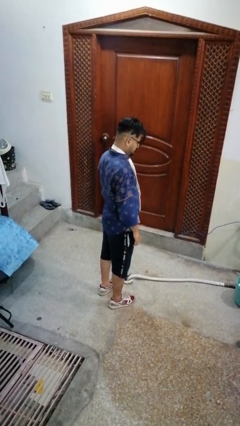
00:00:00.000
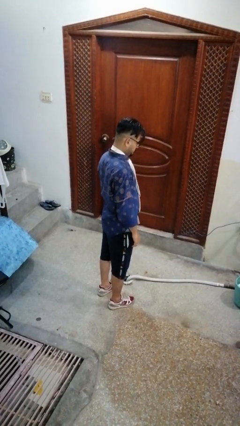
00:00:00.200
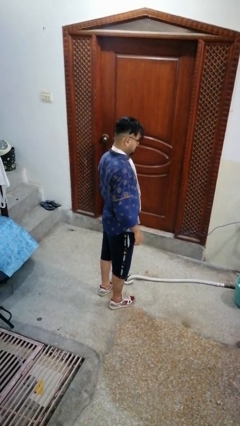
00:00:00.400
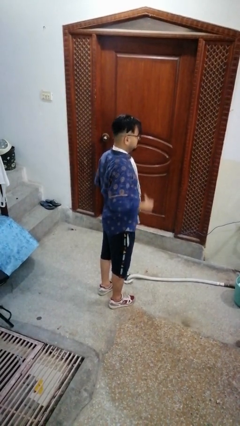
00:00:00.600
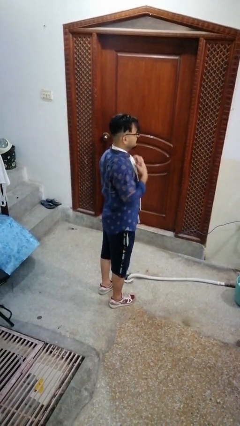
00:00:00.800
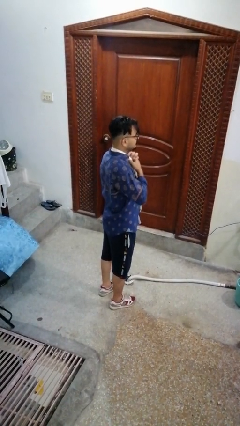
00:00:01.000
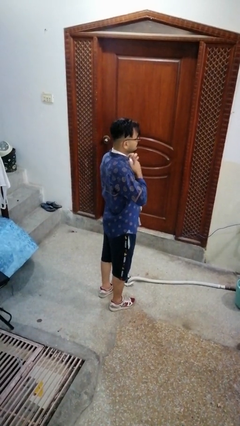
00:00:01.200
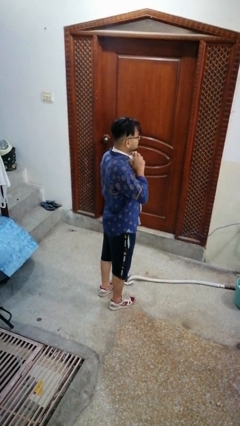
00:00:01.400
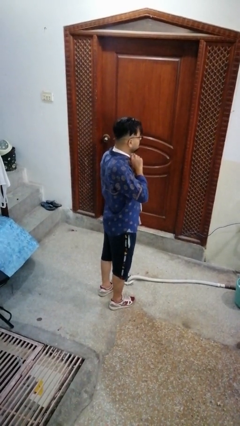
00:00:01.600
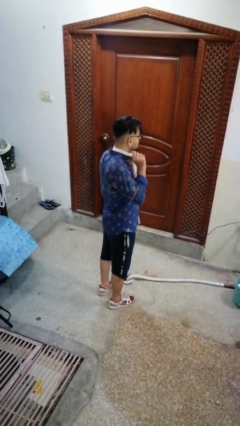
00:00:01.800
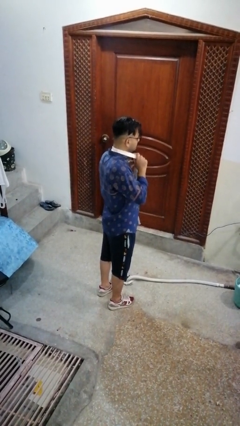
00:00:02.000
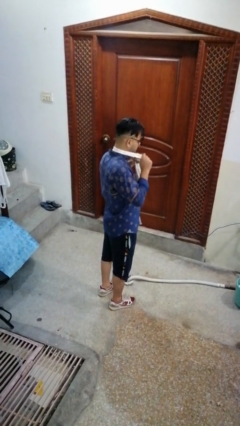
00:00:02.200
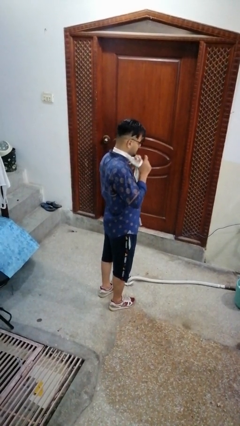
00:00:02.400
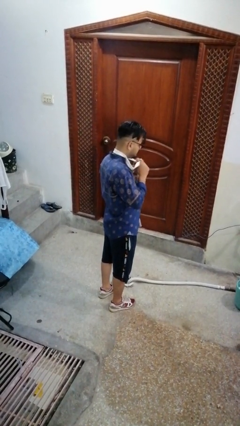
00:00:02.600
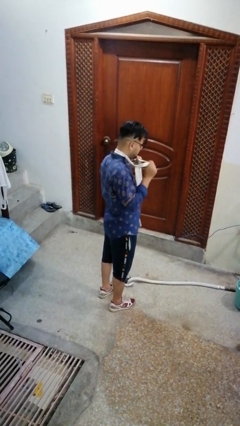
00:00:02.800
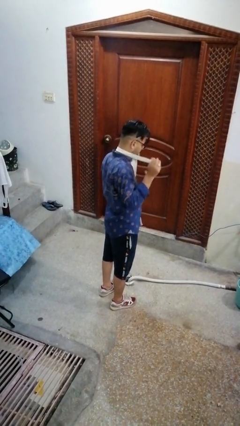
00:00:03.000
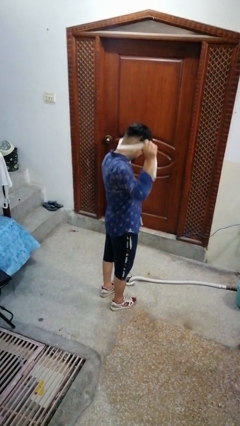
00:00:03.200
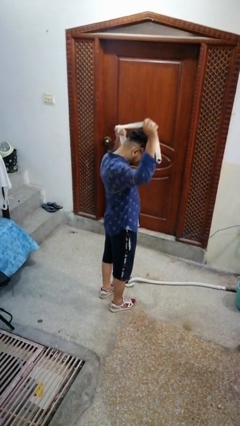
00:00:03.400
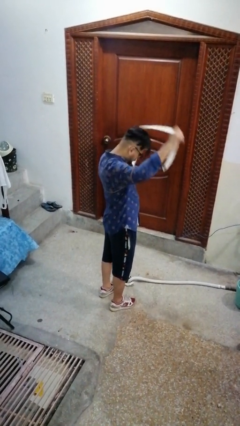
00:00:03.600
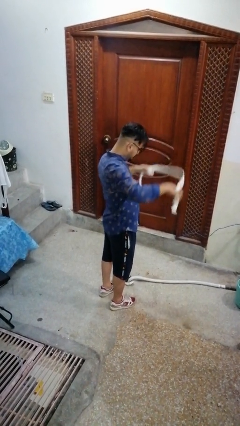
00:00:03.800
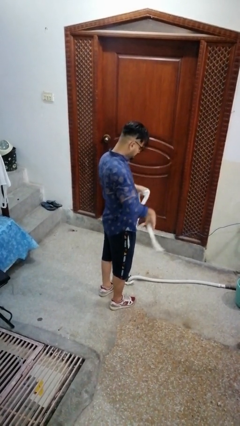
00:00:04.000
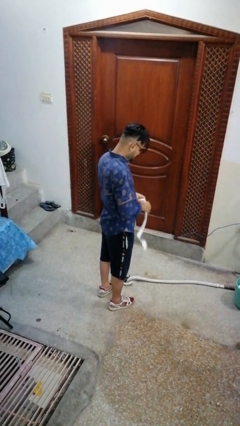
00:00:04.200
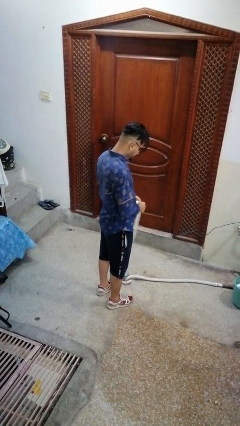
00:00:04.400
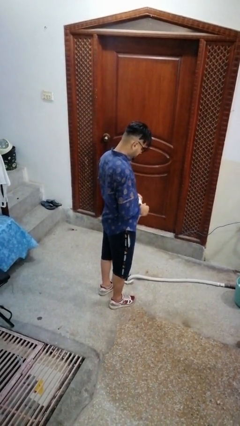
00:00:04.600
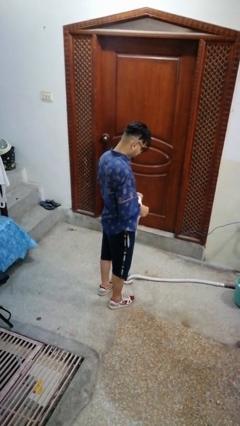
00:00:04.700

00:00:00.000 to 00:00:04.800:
person takes off necktie

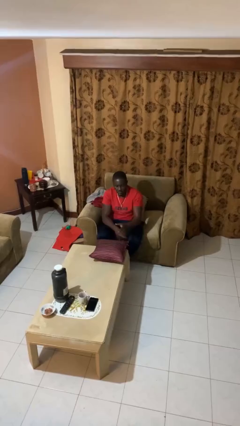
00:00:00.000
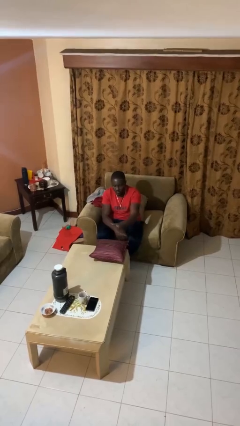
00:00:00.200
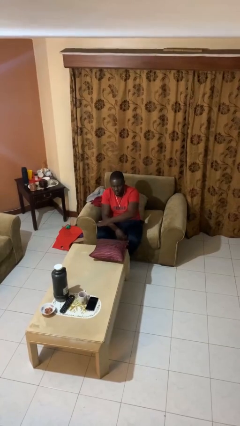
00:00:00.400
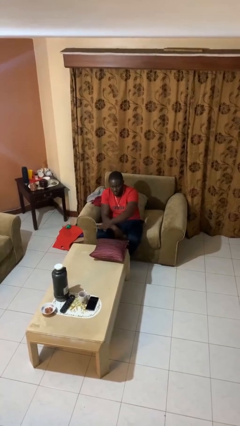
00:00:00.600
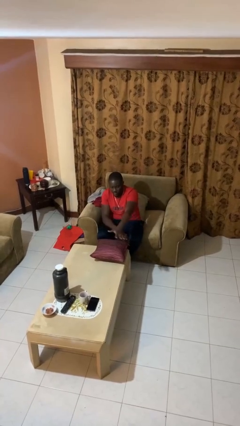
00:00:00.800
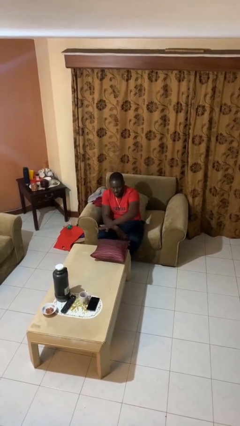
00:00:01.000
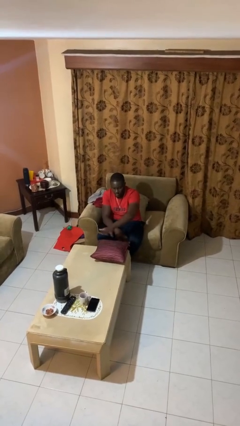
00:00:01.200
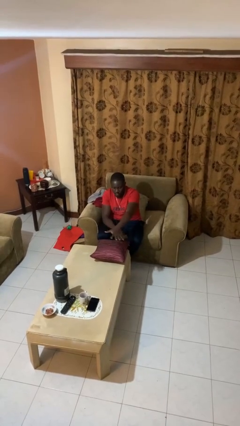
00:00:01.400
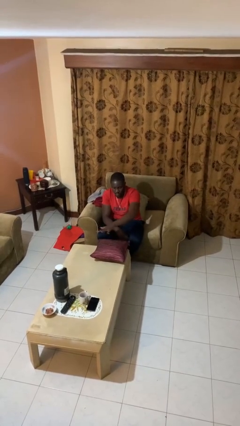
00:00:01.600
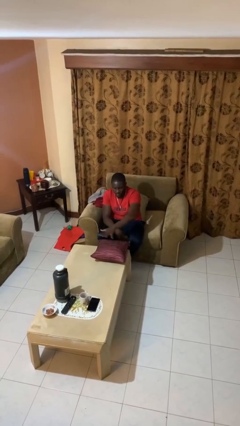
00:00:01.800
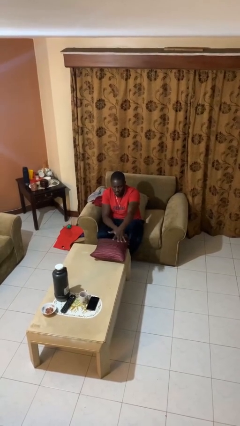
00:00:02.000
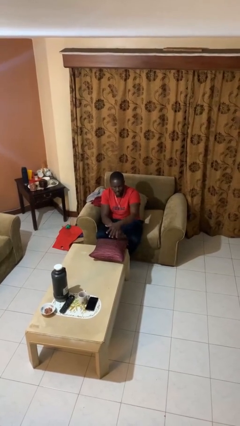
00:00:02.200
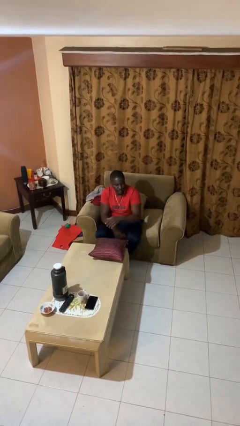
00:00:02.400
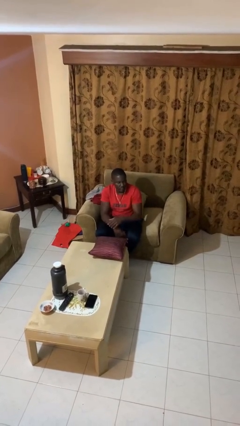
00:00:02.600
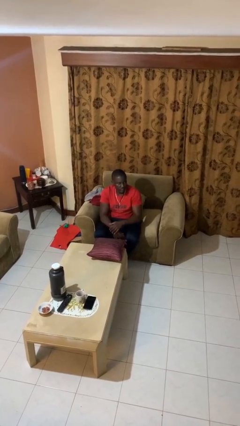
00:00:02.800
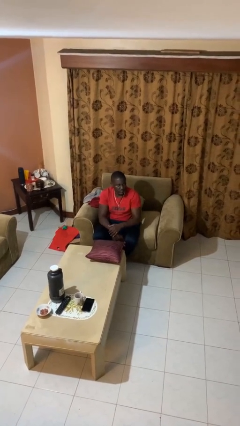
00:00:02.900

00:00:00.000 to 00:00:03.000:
person waves hand over object

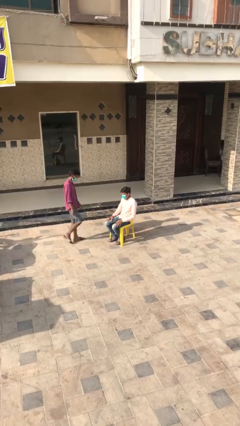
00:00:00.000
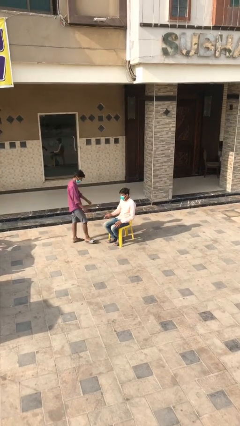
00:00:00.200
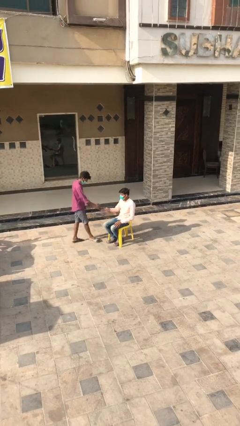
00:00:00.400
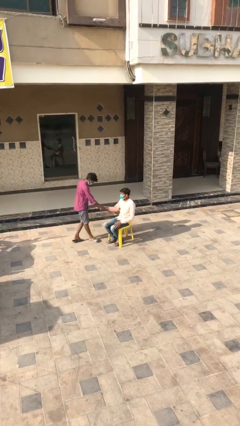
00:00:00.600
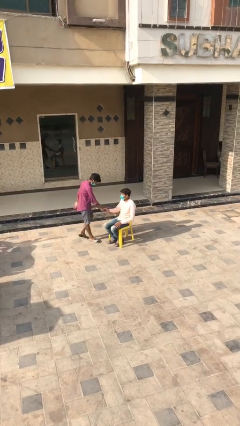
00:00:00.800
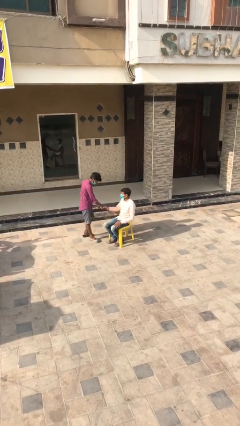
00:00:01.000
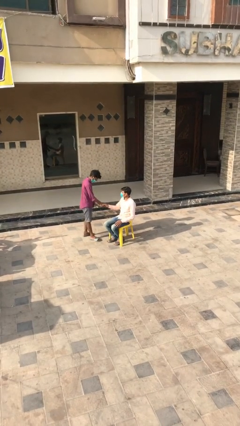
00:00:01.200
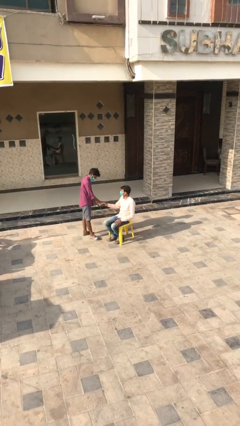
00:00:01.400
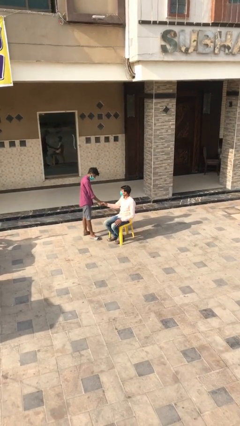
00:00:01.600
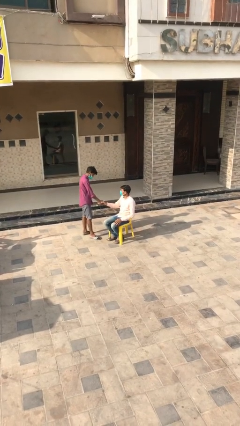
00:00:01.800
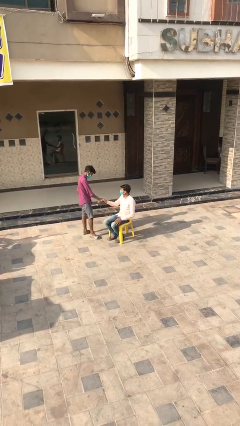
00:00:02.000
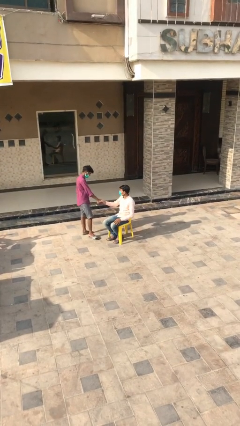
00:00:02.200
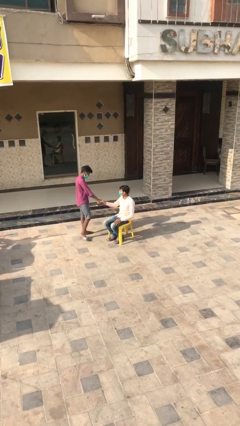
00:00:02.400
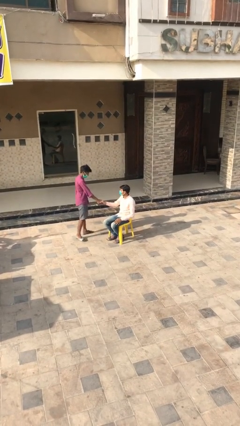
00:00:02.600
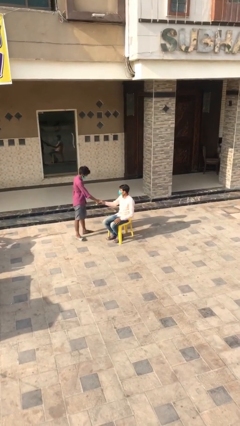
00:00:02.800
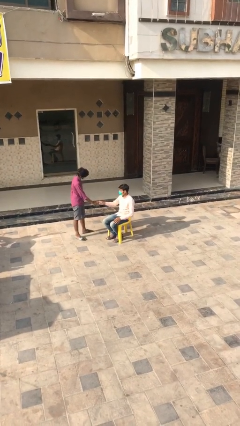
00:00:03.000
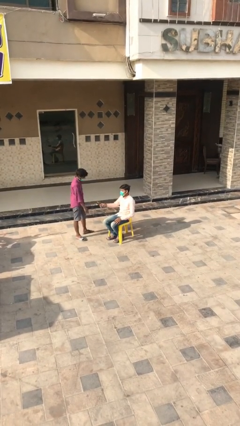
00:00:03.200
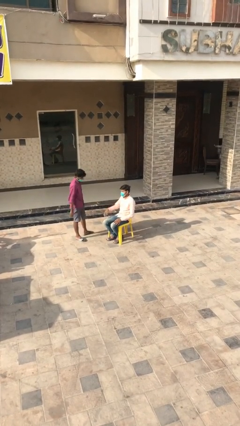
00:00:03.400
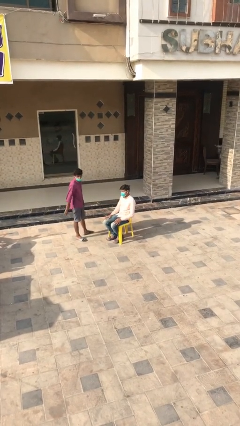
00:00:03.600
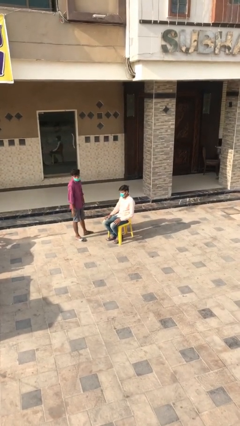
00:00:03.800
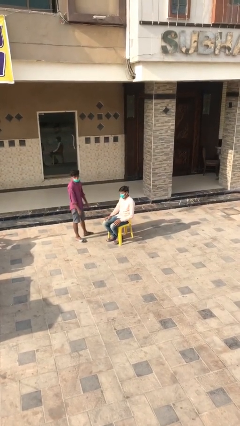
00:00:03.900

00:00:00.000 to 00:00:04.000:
person shakes hand

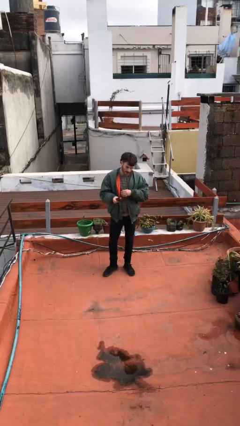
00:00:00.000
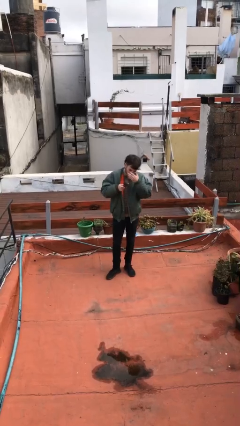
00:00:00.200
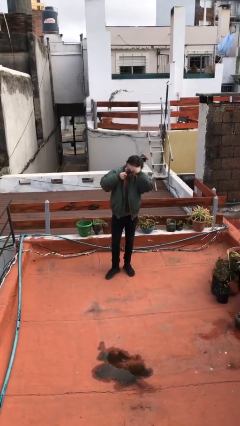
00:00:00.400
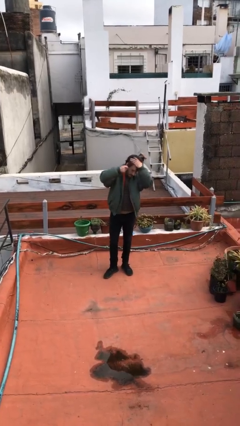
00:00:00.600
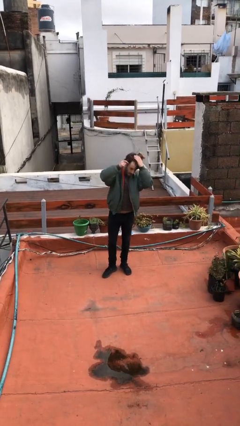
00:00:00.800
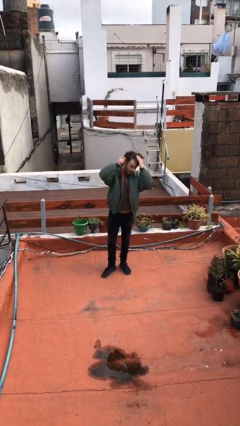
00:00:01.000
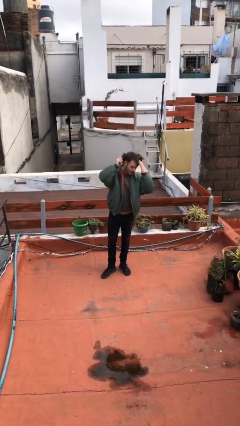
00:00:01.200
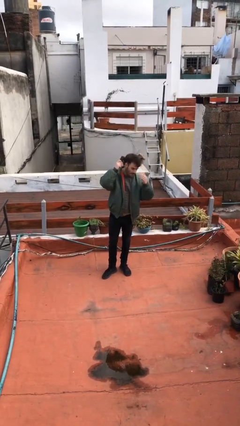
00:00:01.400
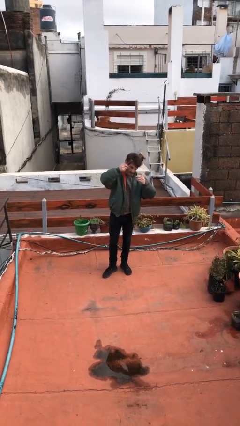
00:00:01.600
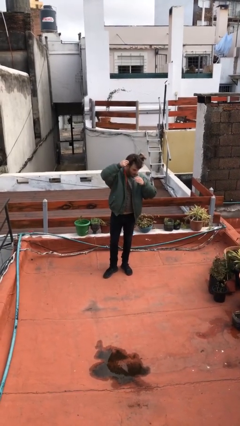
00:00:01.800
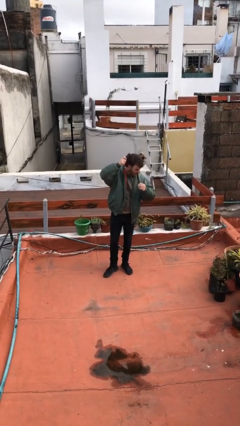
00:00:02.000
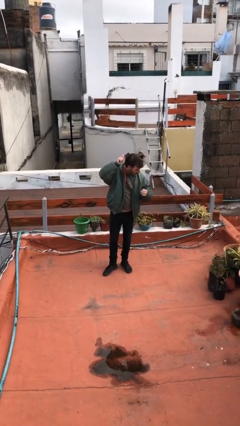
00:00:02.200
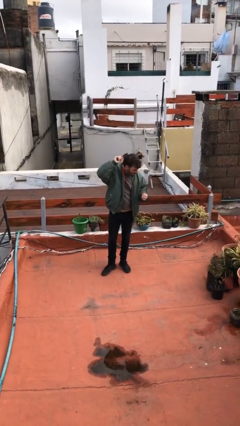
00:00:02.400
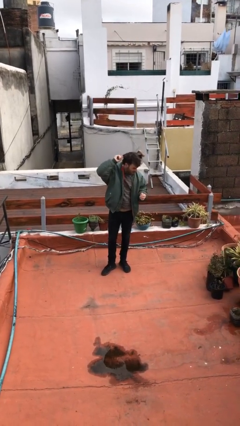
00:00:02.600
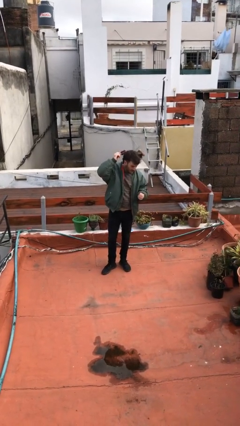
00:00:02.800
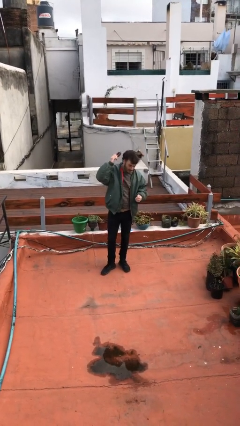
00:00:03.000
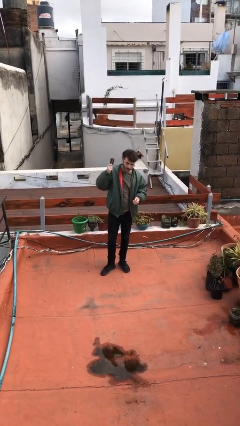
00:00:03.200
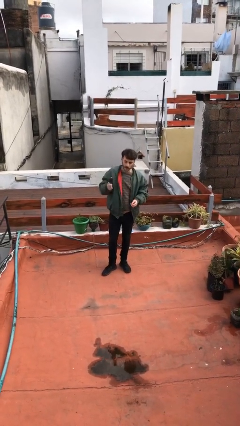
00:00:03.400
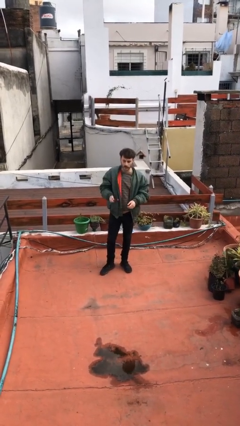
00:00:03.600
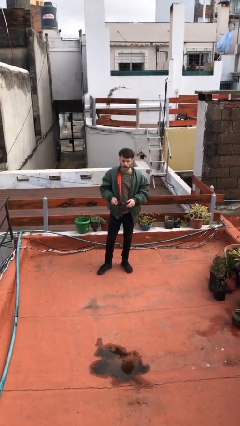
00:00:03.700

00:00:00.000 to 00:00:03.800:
person brushes hair

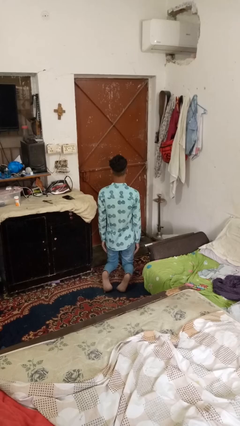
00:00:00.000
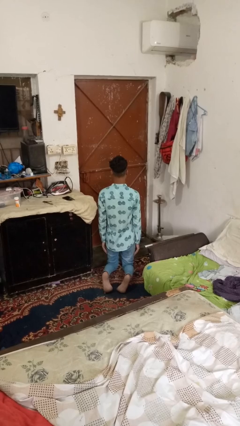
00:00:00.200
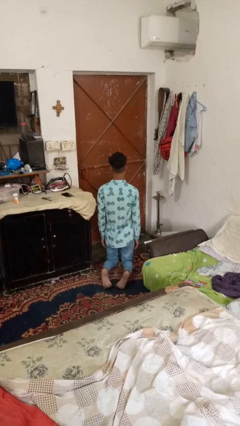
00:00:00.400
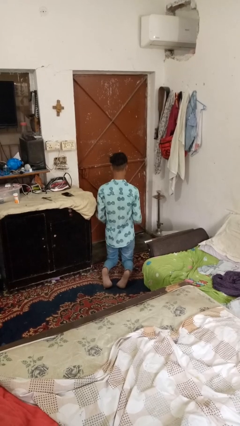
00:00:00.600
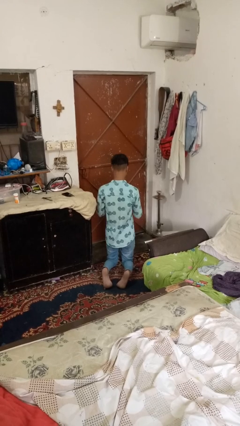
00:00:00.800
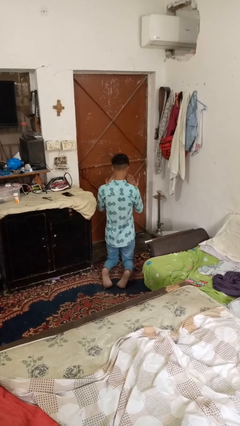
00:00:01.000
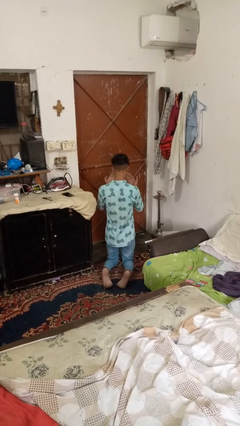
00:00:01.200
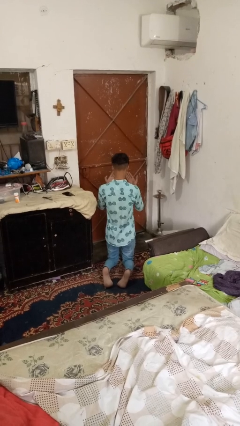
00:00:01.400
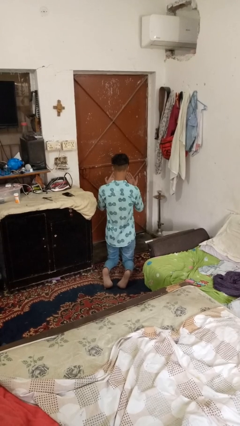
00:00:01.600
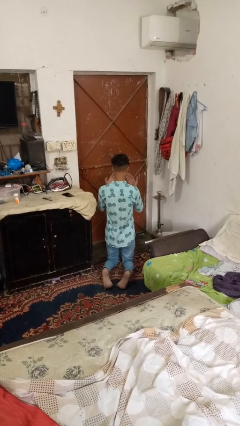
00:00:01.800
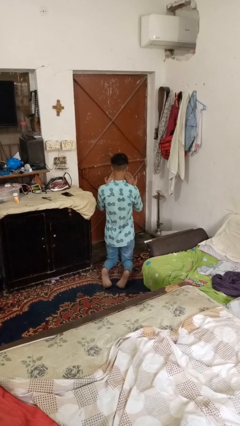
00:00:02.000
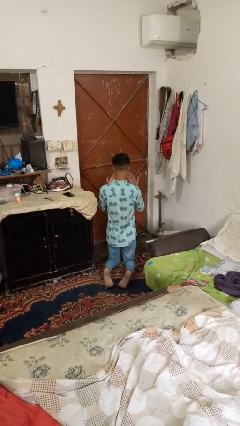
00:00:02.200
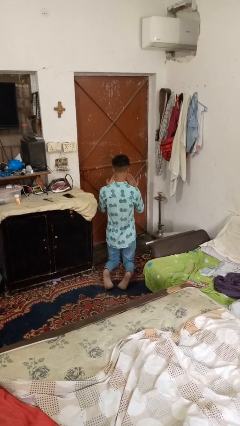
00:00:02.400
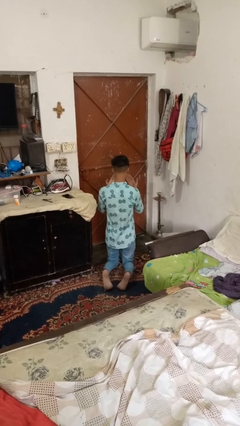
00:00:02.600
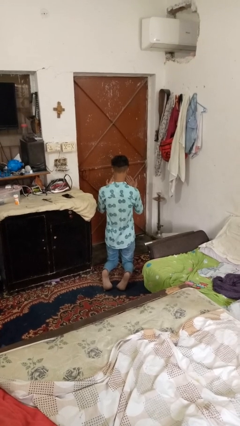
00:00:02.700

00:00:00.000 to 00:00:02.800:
person prays
